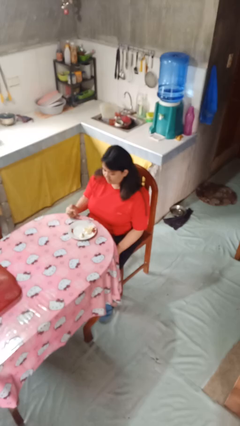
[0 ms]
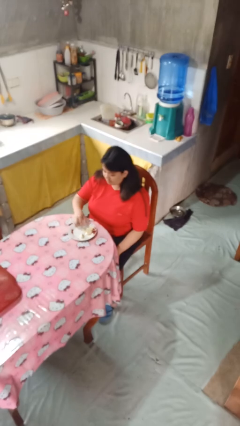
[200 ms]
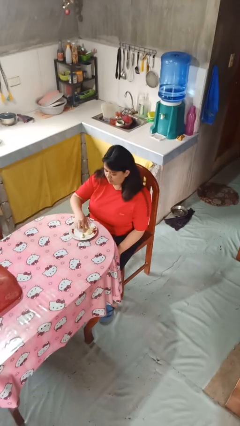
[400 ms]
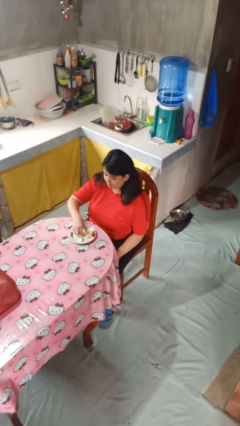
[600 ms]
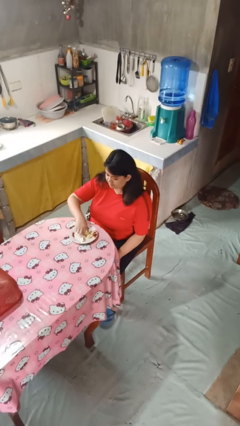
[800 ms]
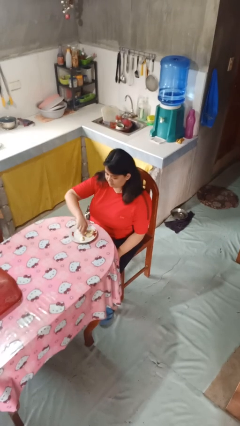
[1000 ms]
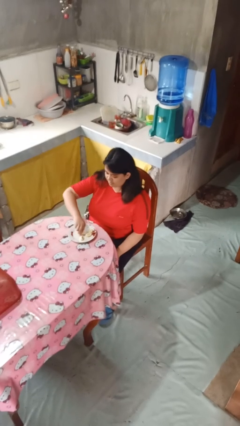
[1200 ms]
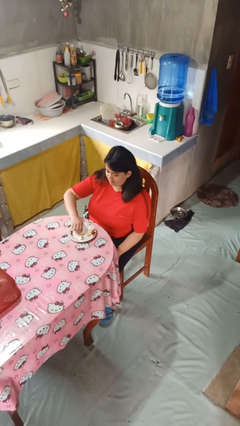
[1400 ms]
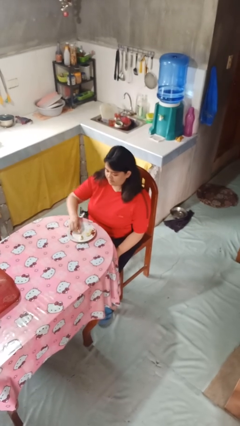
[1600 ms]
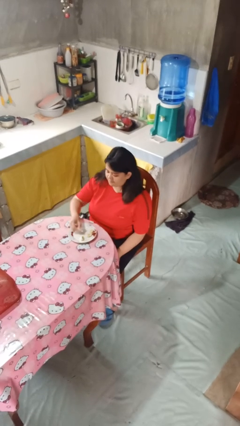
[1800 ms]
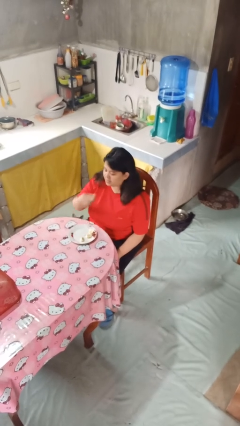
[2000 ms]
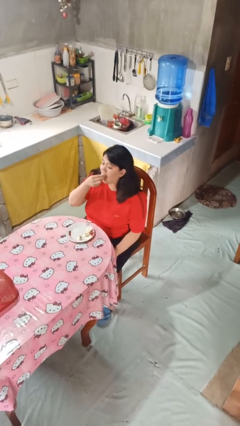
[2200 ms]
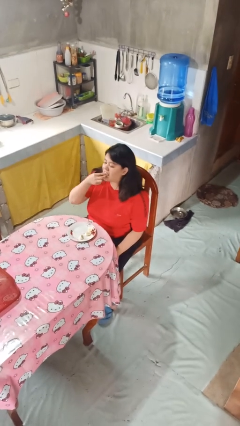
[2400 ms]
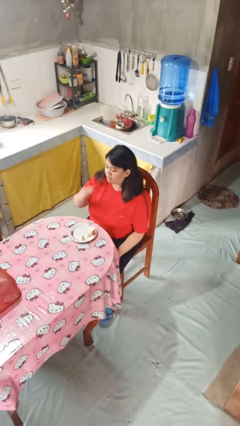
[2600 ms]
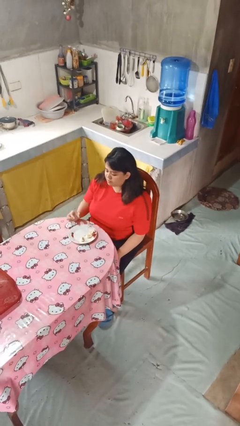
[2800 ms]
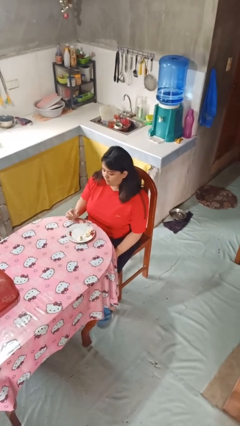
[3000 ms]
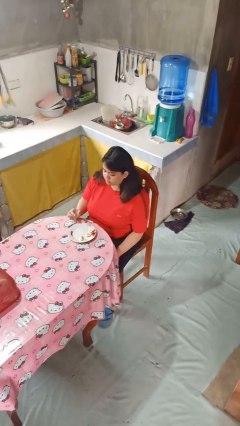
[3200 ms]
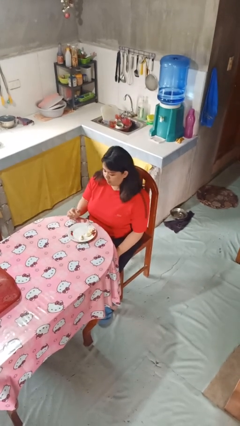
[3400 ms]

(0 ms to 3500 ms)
person eats with hands

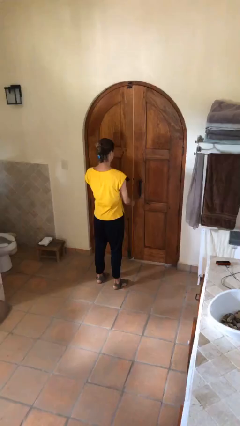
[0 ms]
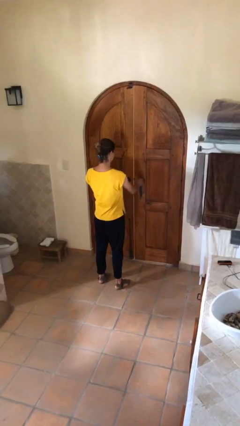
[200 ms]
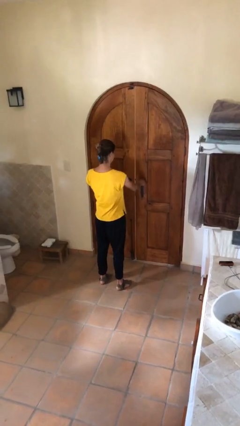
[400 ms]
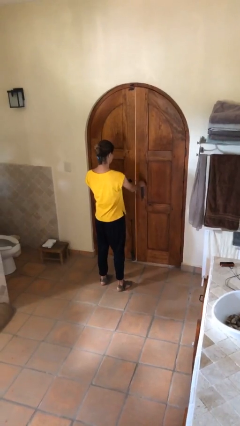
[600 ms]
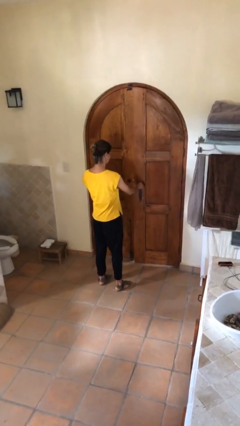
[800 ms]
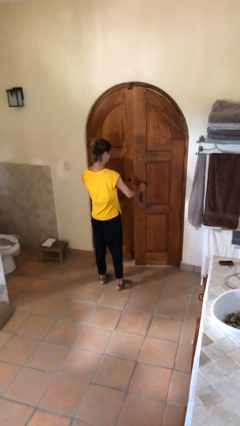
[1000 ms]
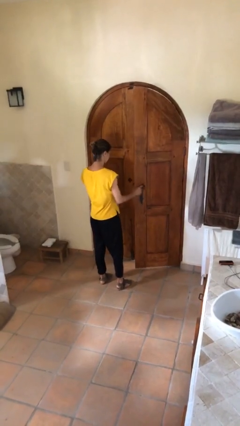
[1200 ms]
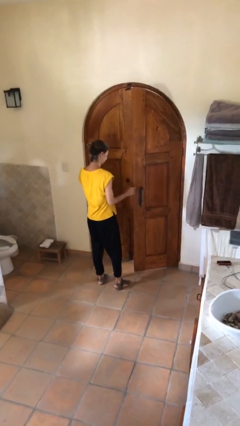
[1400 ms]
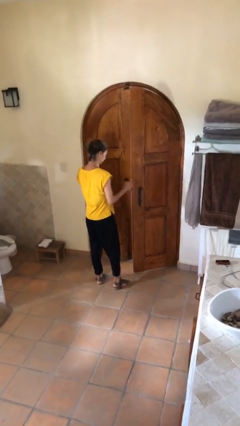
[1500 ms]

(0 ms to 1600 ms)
person opens facility door

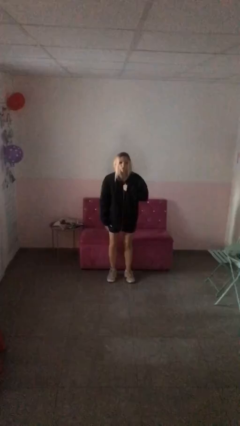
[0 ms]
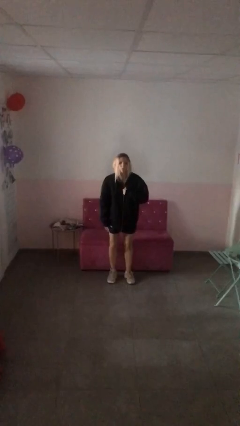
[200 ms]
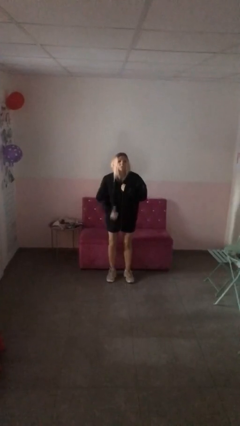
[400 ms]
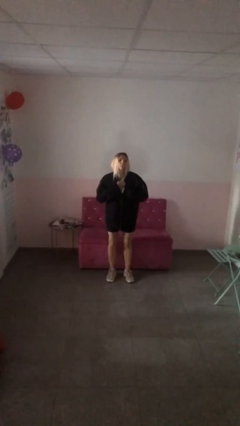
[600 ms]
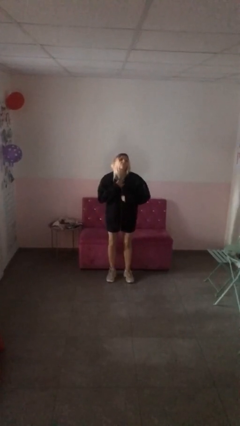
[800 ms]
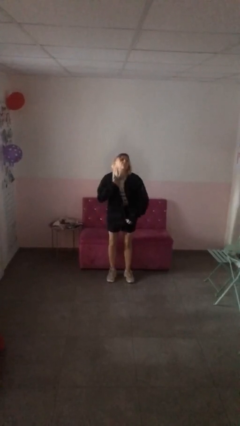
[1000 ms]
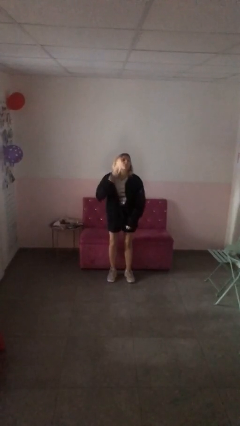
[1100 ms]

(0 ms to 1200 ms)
person unzips jacket

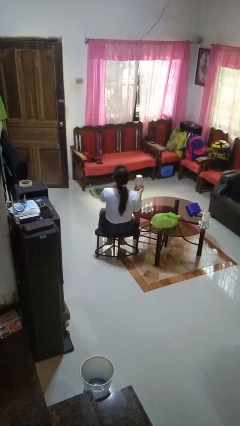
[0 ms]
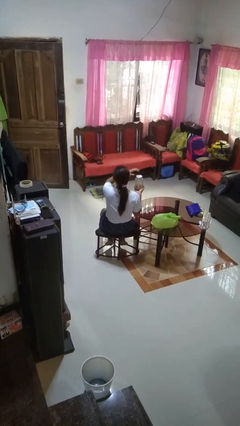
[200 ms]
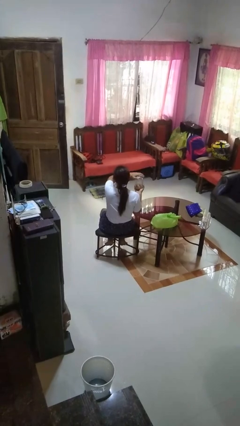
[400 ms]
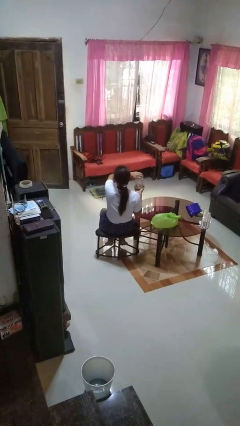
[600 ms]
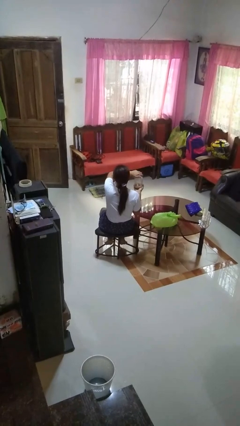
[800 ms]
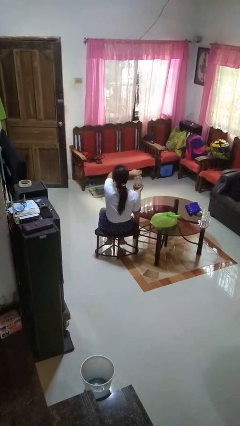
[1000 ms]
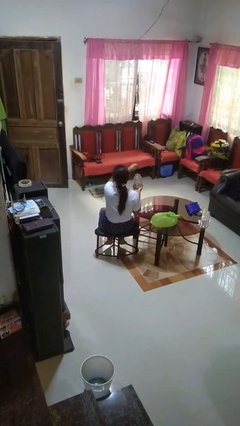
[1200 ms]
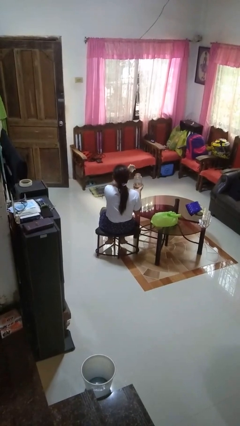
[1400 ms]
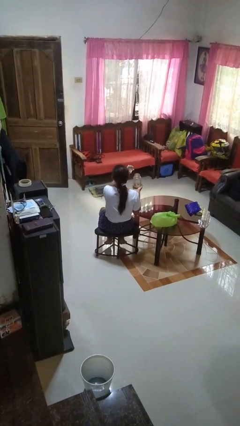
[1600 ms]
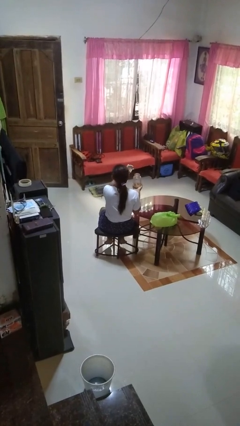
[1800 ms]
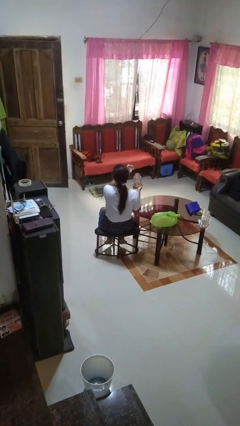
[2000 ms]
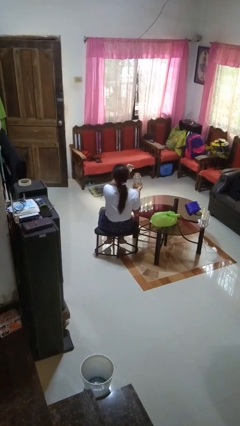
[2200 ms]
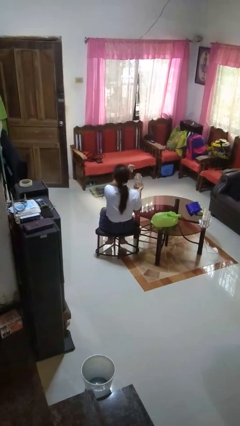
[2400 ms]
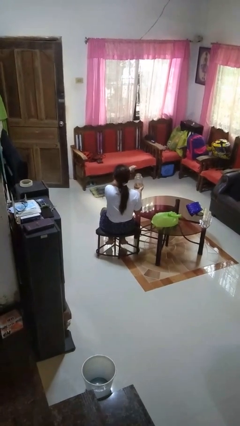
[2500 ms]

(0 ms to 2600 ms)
person opens jar

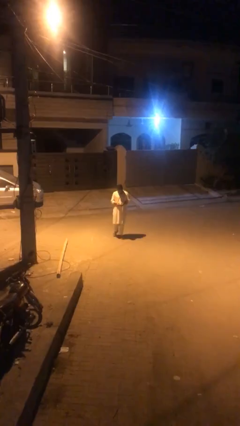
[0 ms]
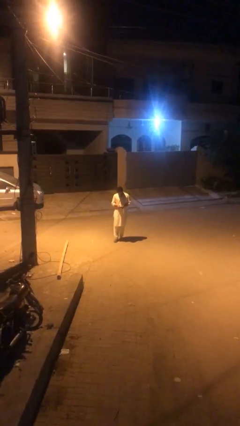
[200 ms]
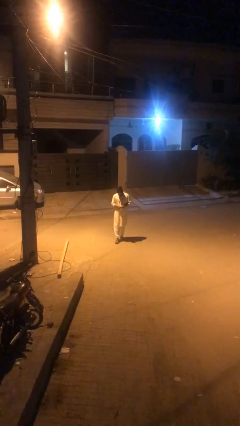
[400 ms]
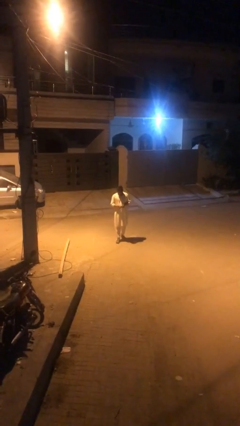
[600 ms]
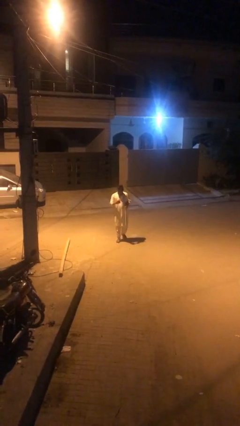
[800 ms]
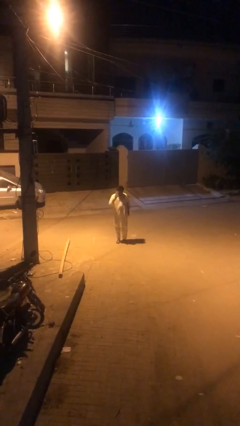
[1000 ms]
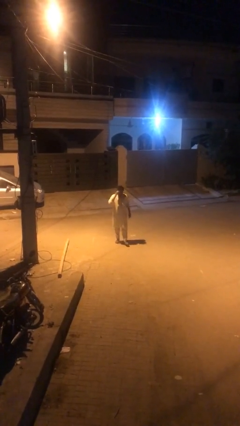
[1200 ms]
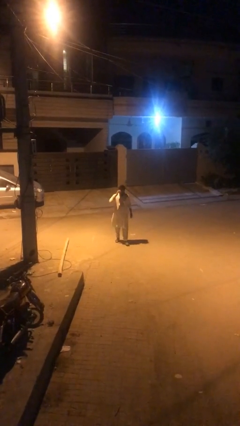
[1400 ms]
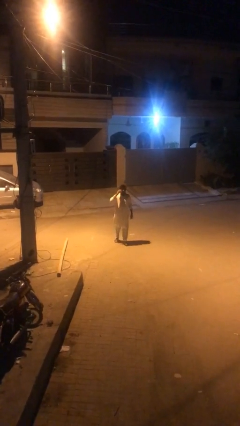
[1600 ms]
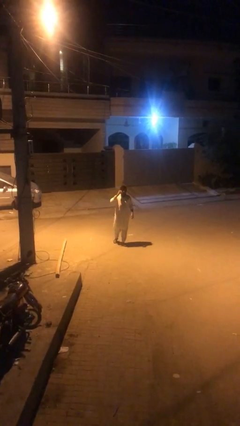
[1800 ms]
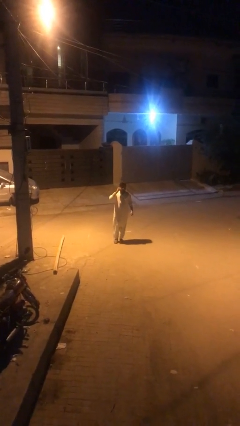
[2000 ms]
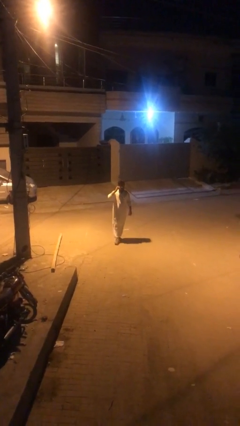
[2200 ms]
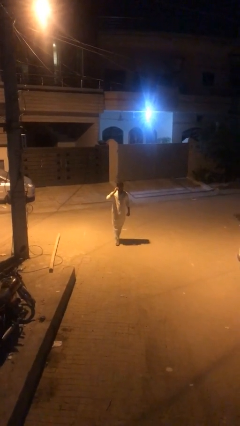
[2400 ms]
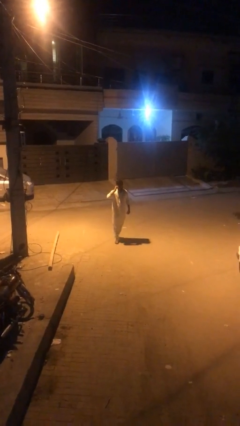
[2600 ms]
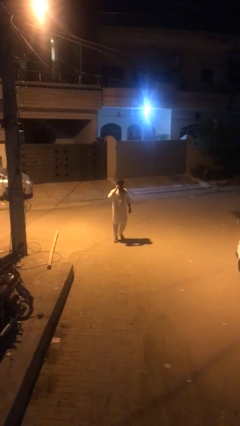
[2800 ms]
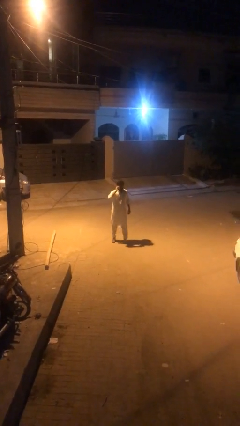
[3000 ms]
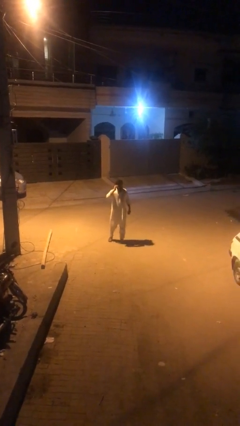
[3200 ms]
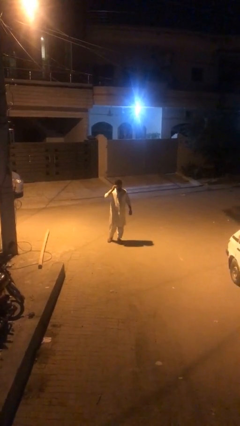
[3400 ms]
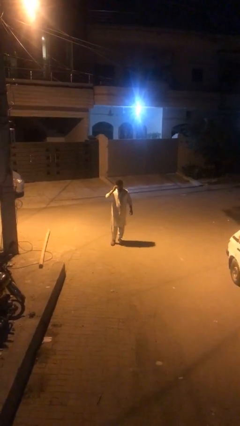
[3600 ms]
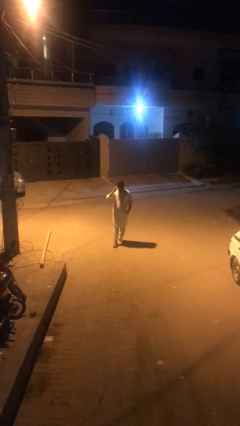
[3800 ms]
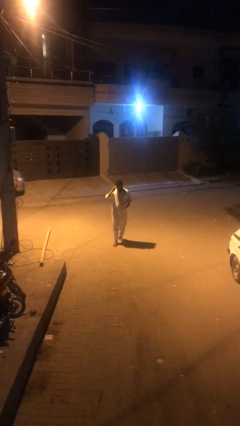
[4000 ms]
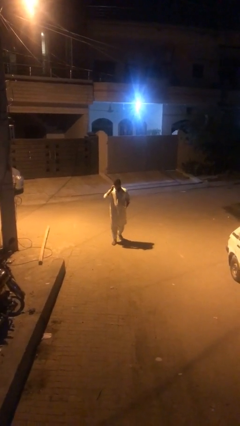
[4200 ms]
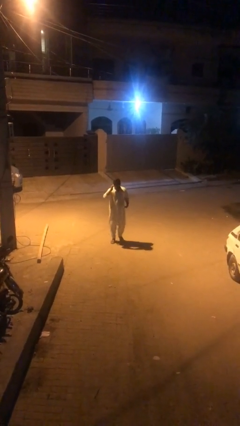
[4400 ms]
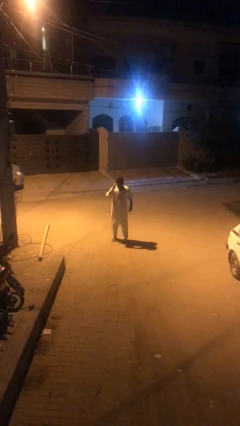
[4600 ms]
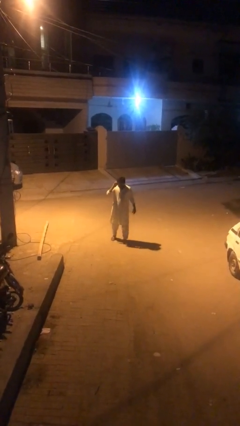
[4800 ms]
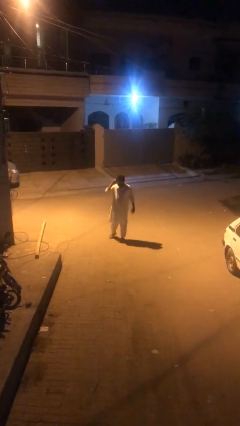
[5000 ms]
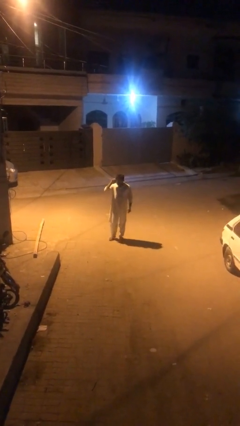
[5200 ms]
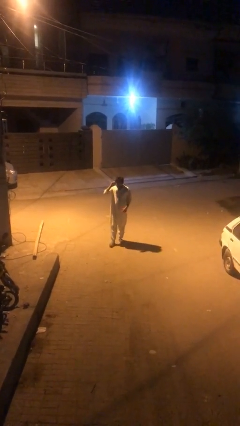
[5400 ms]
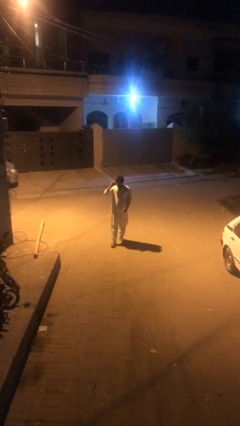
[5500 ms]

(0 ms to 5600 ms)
person talks on phone

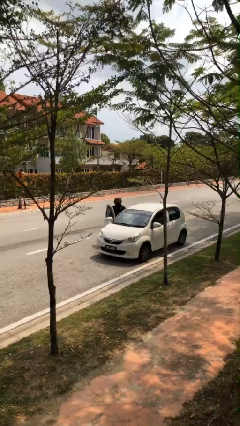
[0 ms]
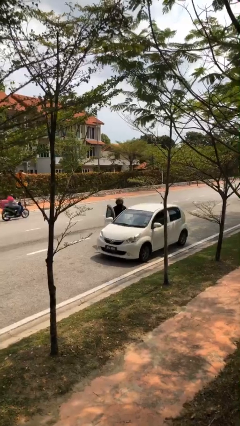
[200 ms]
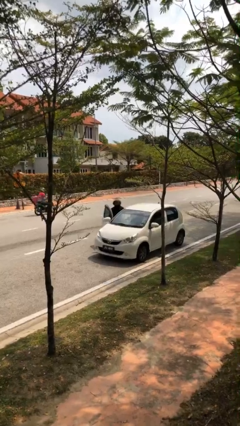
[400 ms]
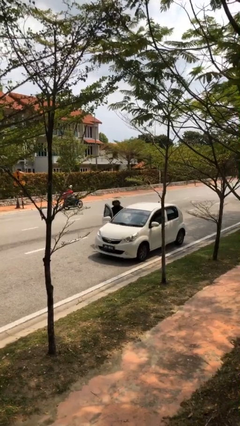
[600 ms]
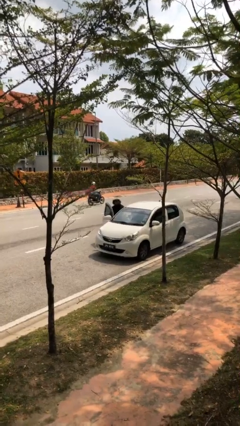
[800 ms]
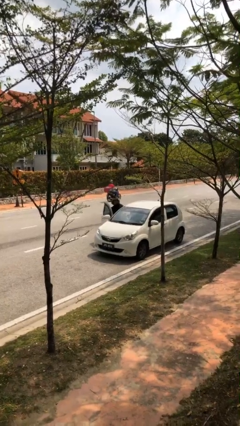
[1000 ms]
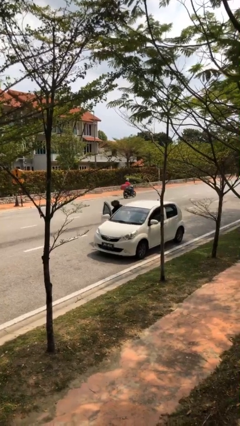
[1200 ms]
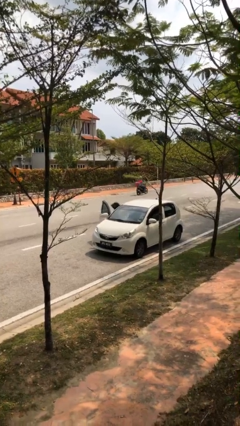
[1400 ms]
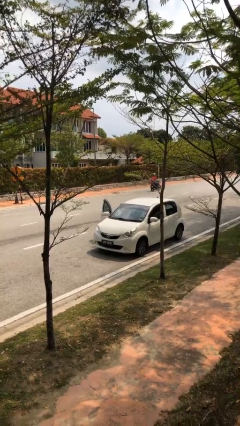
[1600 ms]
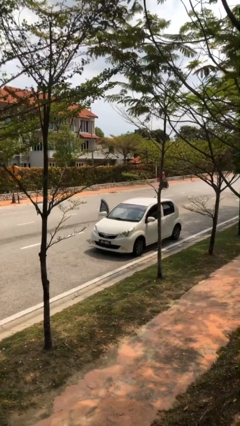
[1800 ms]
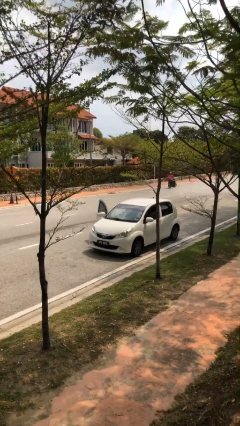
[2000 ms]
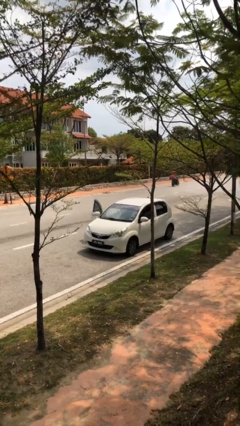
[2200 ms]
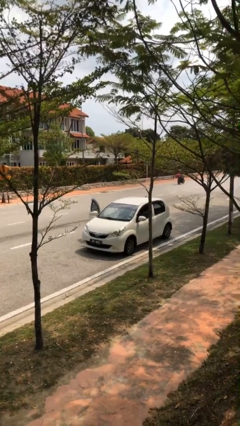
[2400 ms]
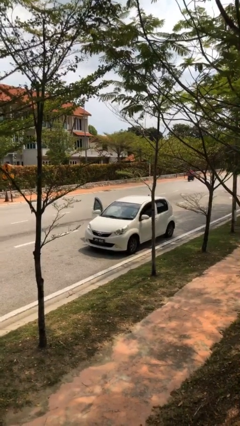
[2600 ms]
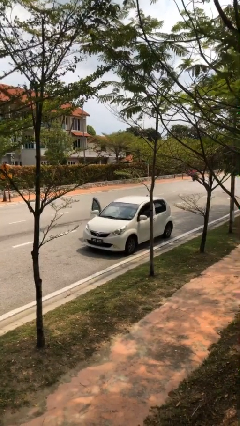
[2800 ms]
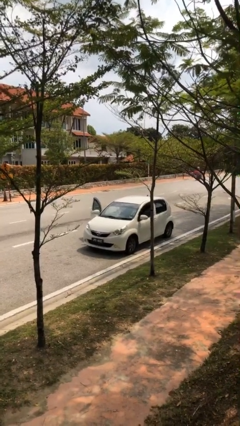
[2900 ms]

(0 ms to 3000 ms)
person enters car
